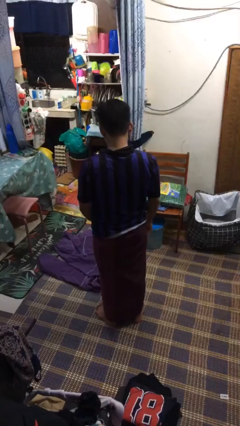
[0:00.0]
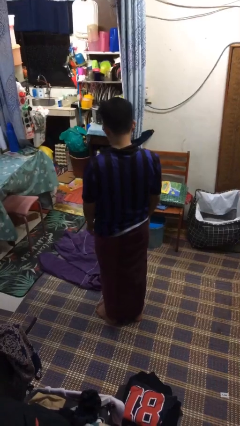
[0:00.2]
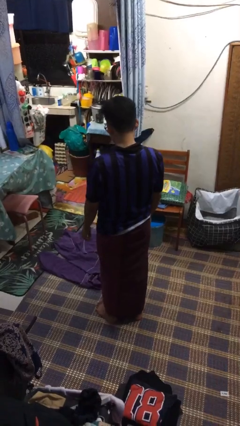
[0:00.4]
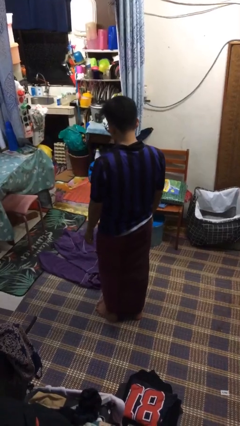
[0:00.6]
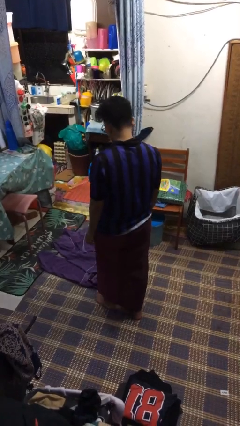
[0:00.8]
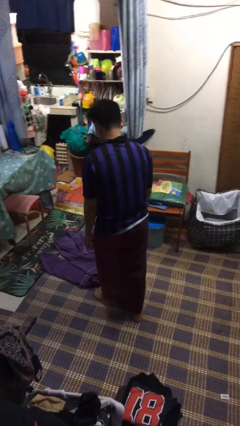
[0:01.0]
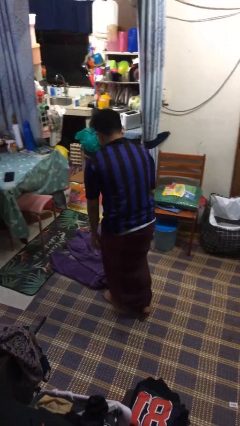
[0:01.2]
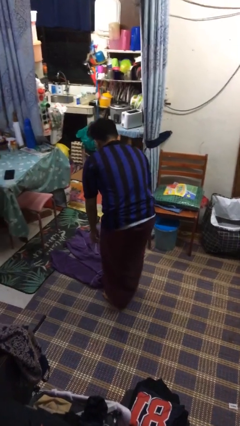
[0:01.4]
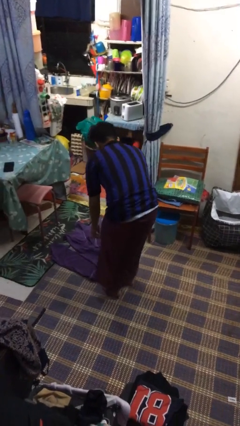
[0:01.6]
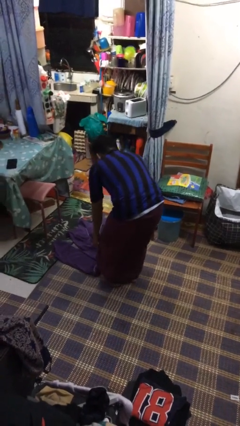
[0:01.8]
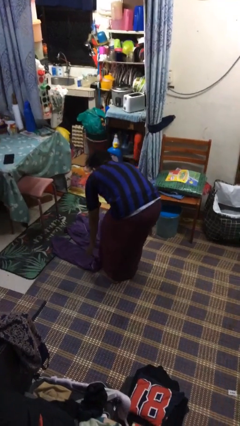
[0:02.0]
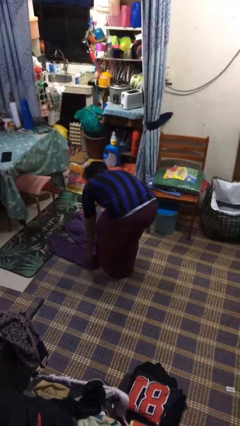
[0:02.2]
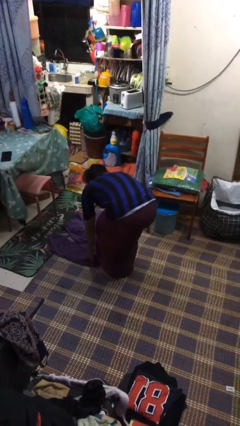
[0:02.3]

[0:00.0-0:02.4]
person picks up object from floor

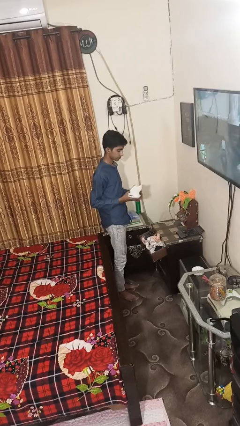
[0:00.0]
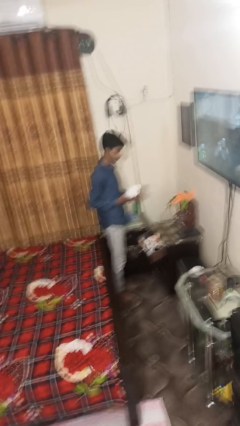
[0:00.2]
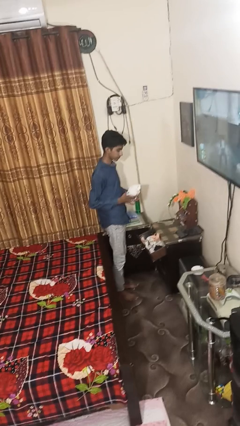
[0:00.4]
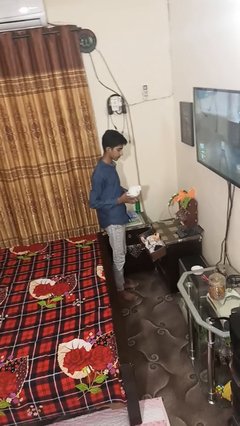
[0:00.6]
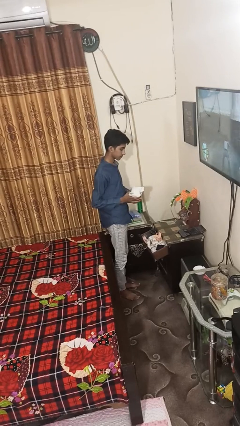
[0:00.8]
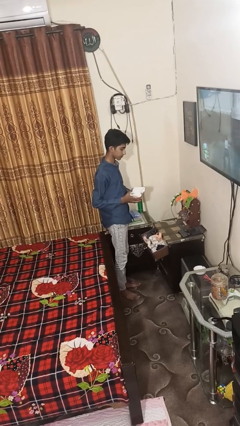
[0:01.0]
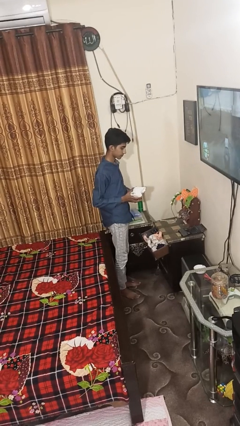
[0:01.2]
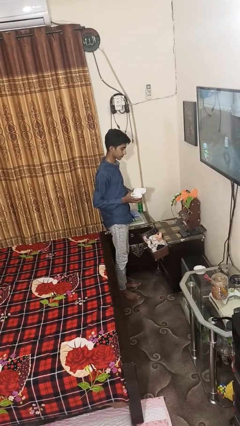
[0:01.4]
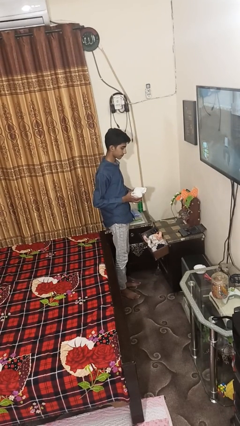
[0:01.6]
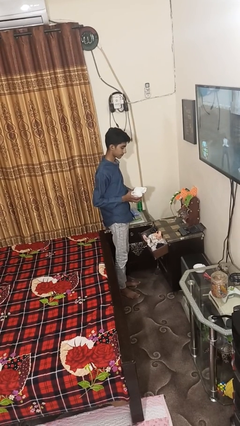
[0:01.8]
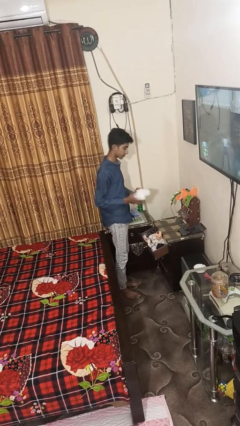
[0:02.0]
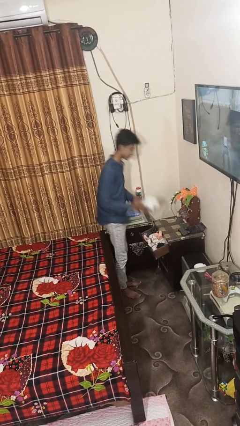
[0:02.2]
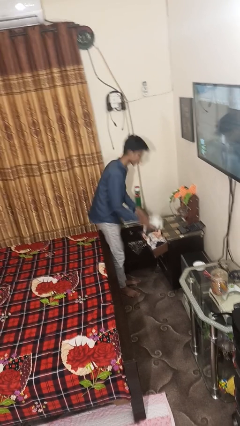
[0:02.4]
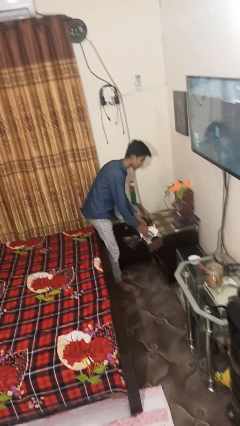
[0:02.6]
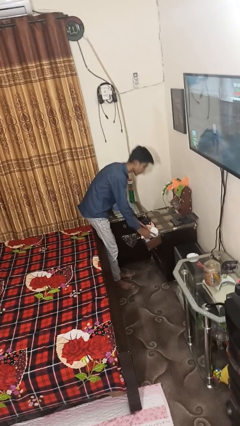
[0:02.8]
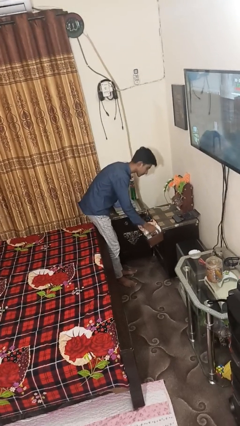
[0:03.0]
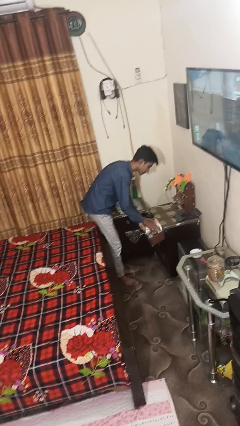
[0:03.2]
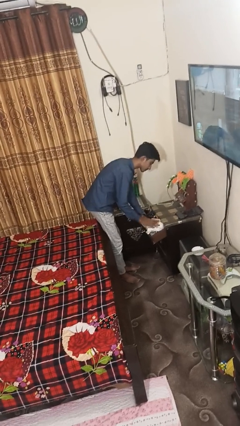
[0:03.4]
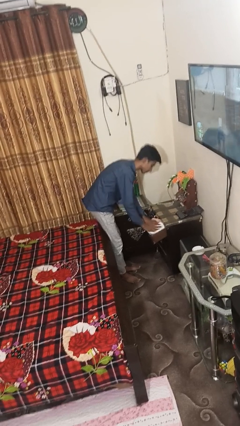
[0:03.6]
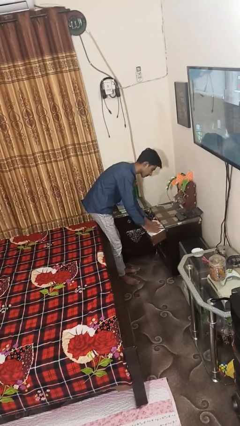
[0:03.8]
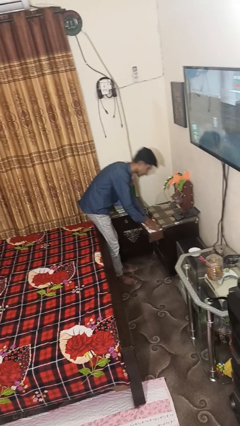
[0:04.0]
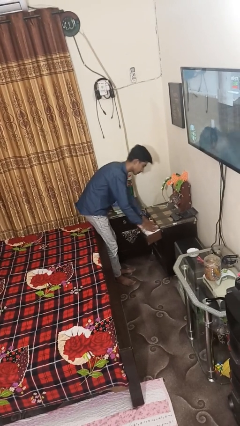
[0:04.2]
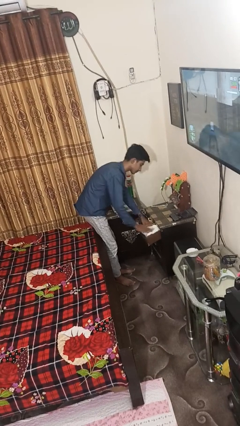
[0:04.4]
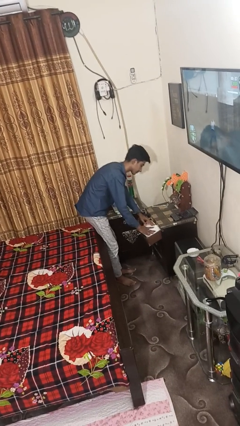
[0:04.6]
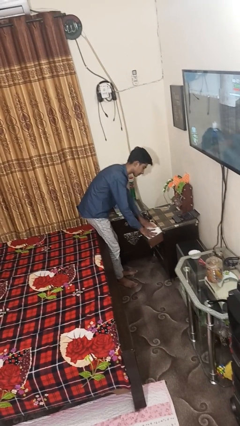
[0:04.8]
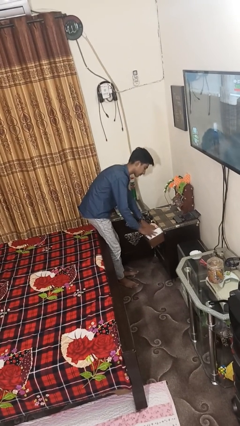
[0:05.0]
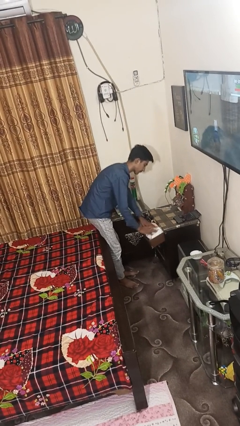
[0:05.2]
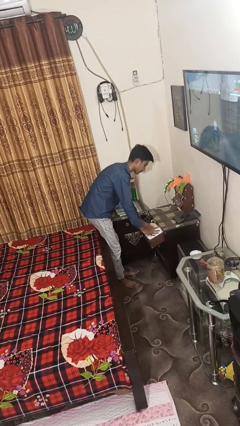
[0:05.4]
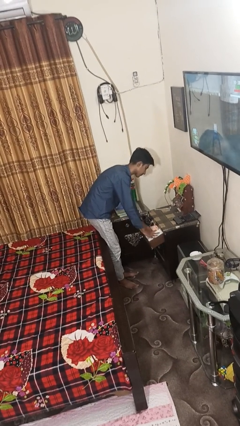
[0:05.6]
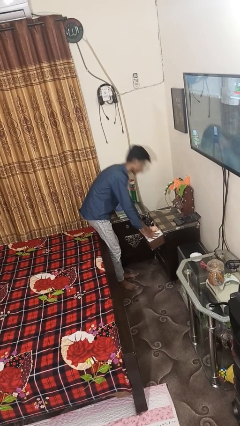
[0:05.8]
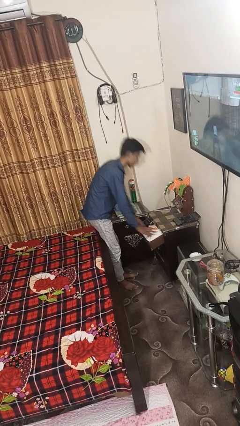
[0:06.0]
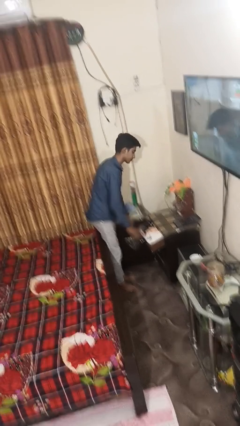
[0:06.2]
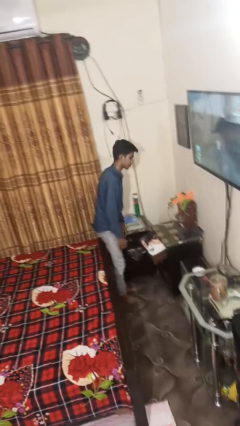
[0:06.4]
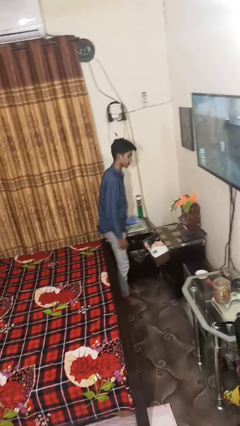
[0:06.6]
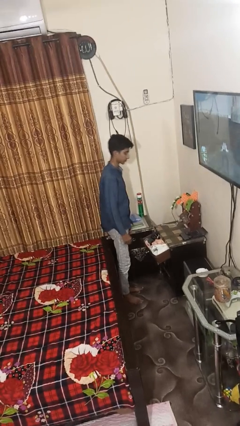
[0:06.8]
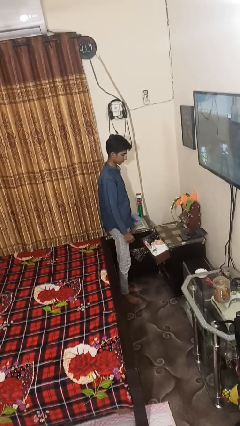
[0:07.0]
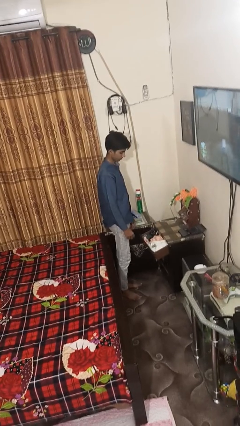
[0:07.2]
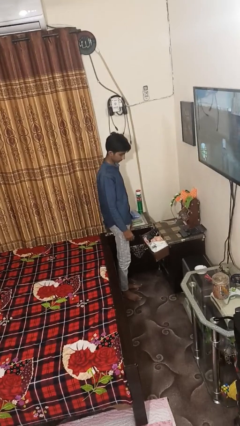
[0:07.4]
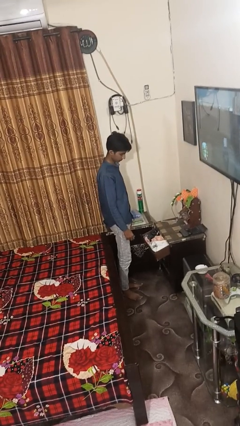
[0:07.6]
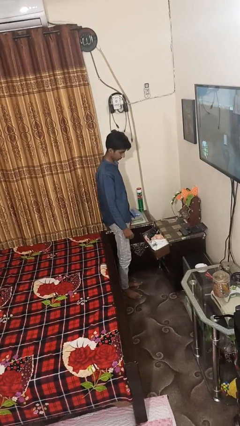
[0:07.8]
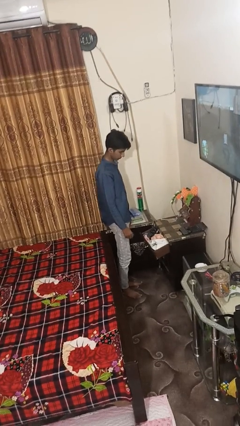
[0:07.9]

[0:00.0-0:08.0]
person puts clothes into dresser

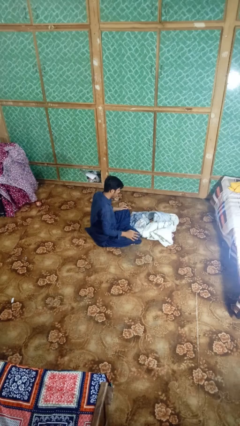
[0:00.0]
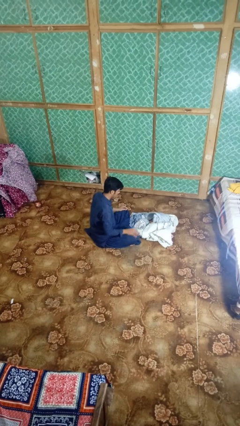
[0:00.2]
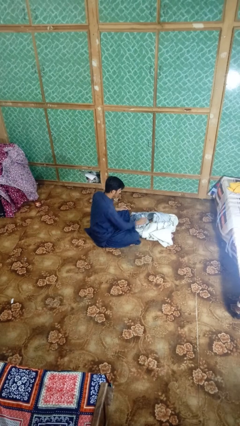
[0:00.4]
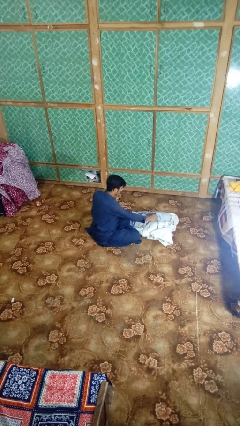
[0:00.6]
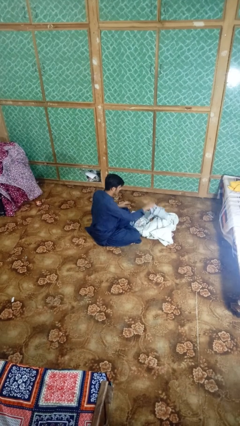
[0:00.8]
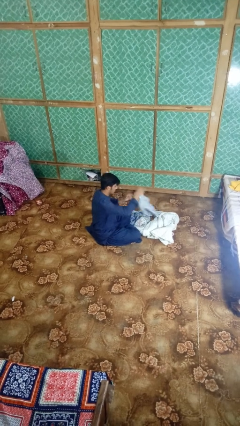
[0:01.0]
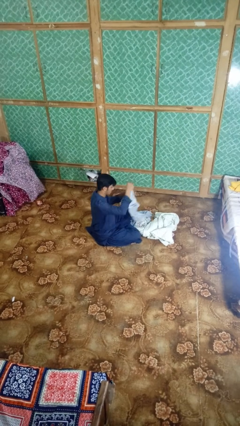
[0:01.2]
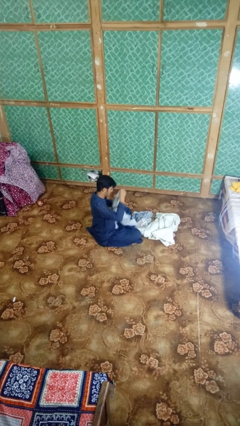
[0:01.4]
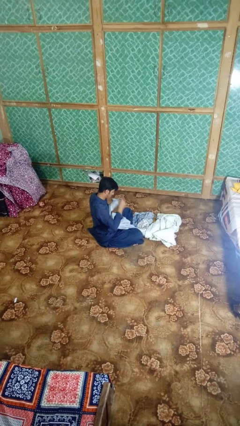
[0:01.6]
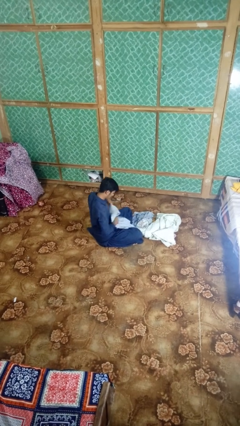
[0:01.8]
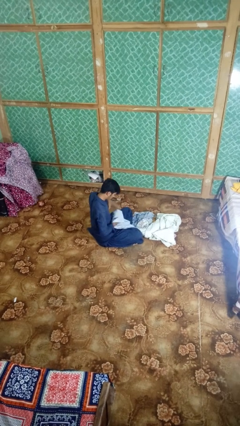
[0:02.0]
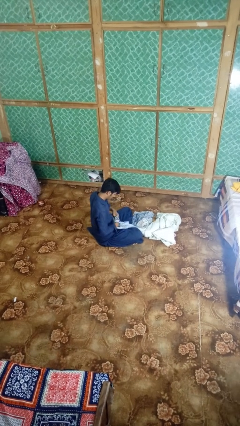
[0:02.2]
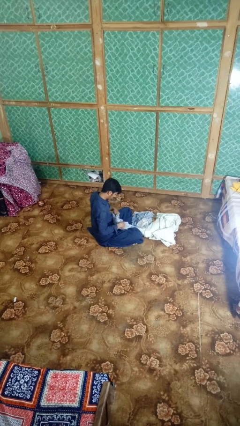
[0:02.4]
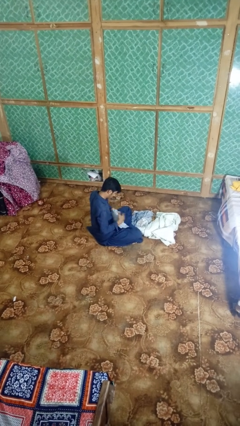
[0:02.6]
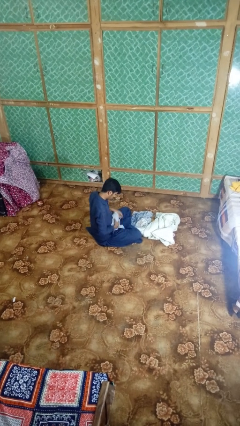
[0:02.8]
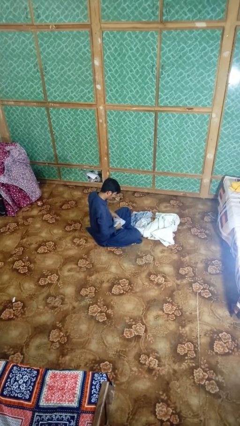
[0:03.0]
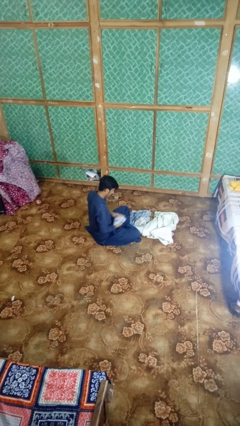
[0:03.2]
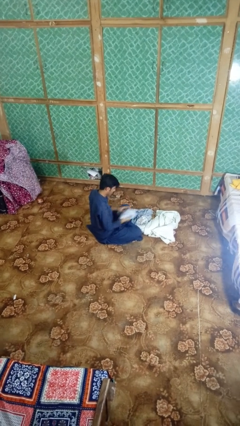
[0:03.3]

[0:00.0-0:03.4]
person folds shirt

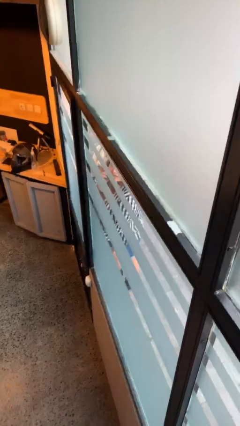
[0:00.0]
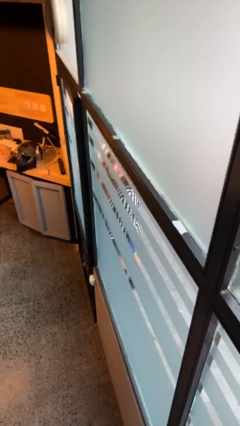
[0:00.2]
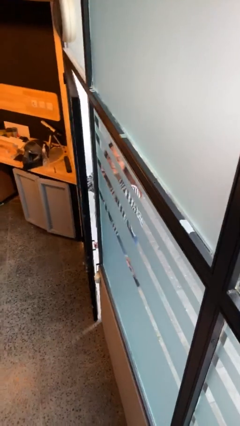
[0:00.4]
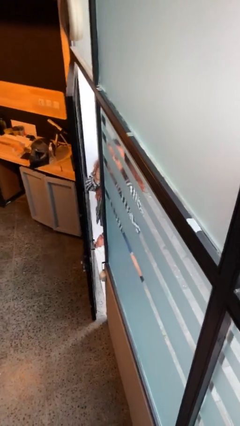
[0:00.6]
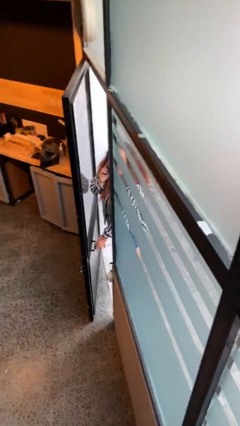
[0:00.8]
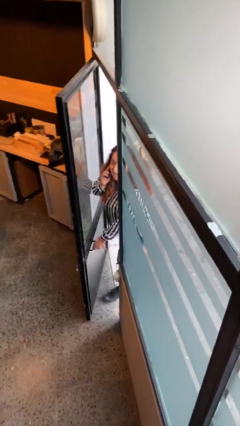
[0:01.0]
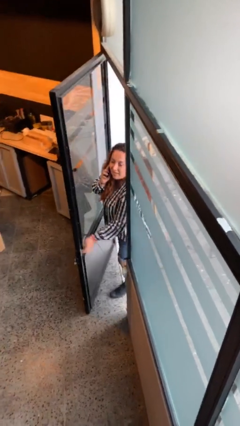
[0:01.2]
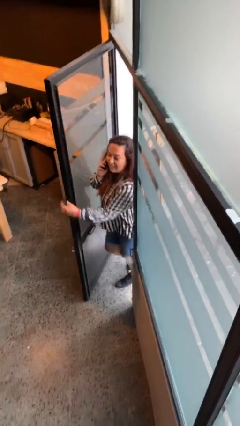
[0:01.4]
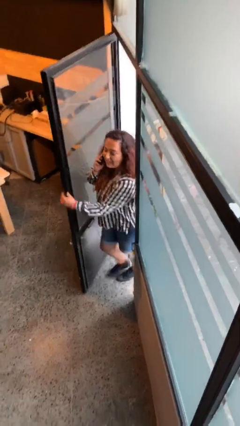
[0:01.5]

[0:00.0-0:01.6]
person opens facility door

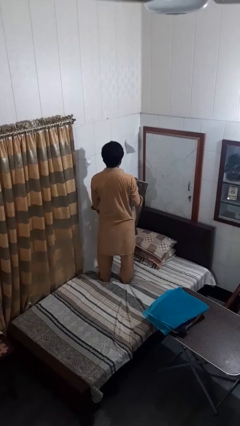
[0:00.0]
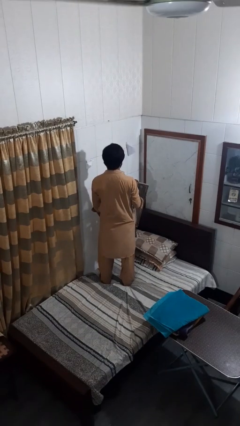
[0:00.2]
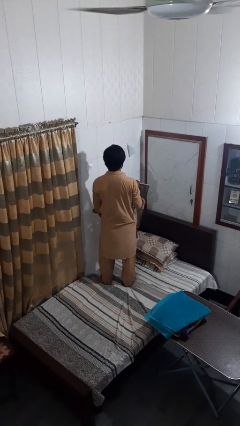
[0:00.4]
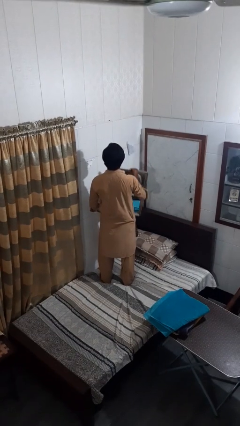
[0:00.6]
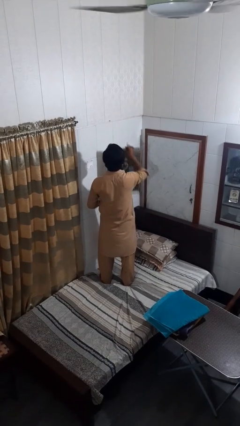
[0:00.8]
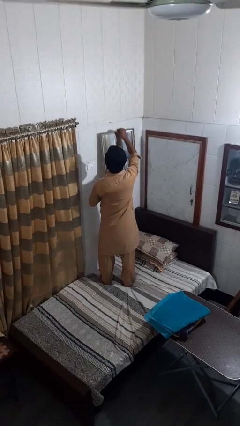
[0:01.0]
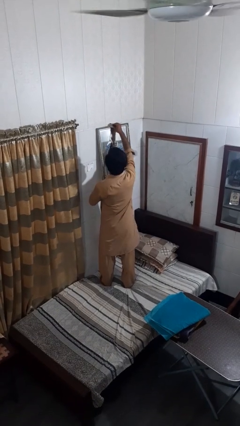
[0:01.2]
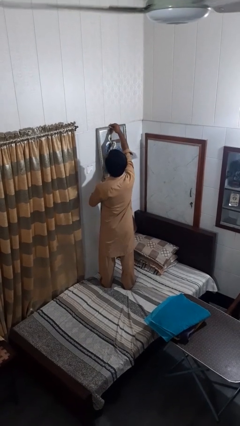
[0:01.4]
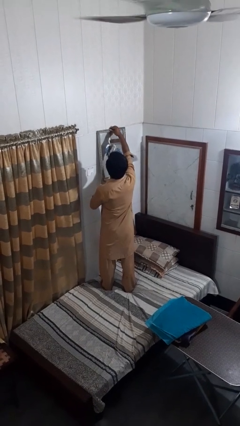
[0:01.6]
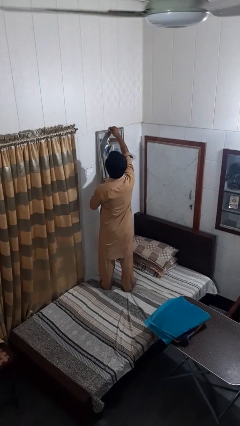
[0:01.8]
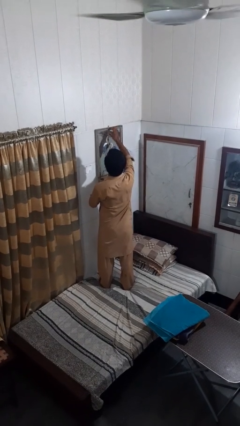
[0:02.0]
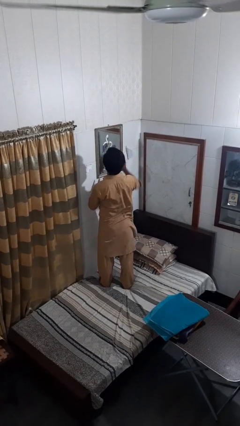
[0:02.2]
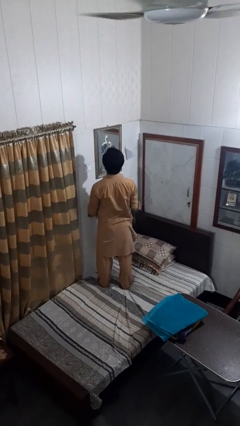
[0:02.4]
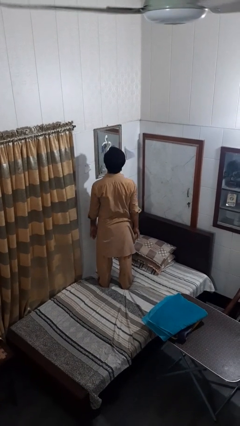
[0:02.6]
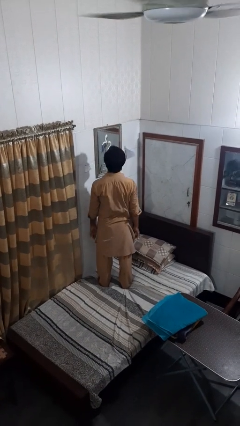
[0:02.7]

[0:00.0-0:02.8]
person puts up picture frame
